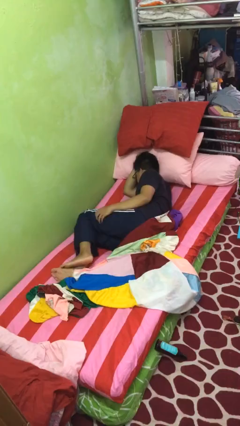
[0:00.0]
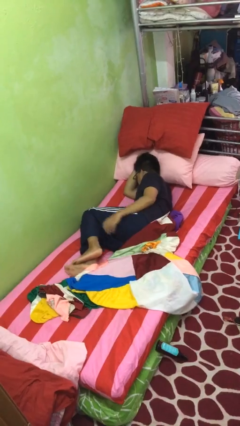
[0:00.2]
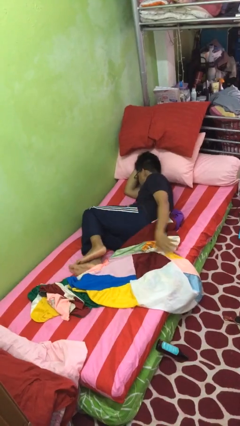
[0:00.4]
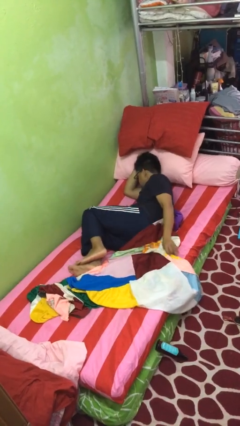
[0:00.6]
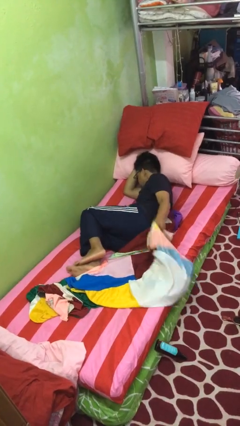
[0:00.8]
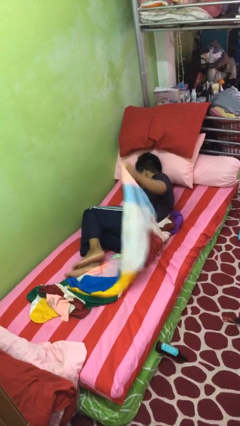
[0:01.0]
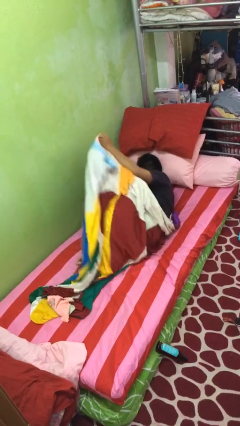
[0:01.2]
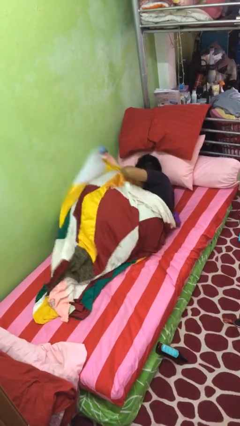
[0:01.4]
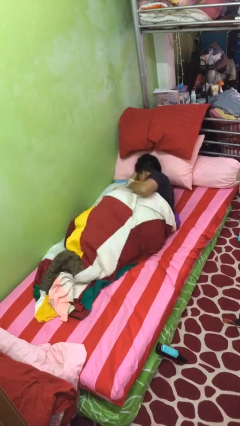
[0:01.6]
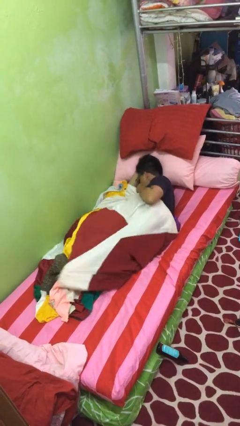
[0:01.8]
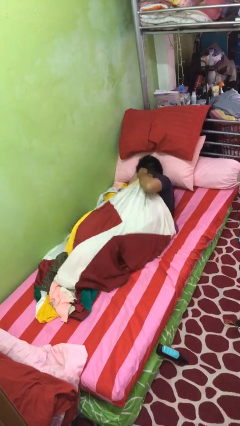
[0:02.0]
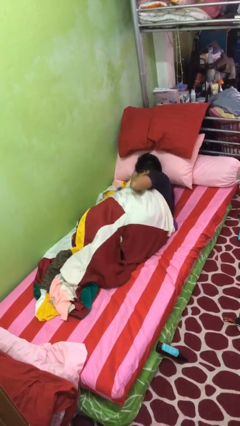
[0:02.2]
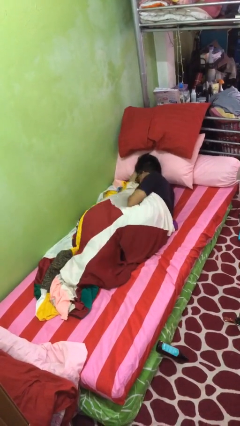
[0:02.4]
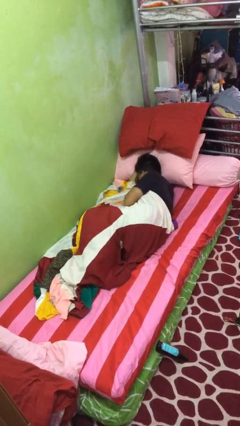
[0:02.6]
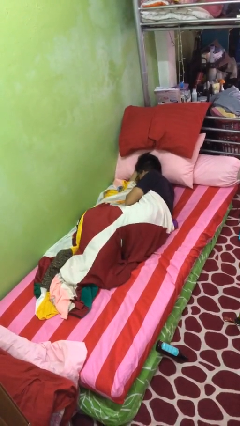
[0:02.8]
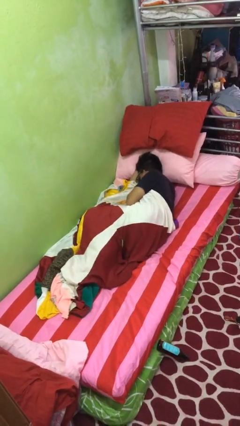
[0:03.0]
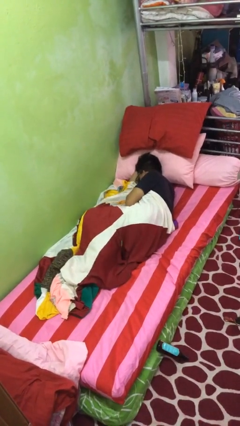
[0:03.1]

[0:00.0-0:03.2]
person covers with blanket

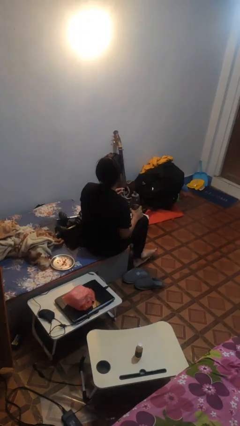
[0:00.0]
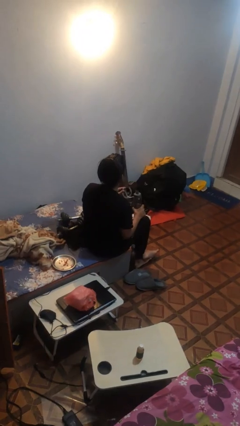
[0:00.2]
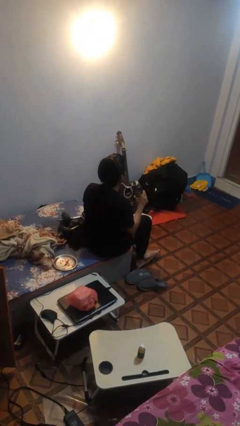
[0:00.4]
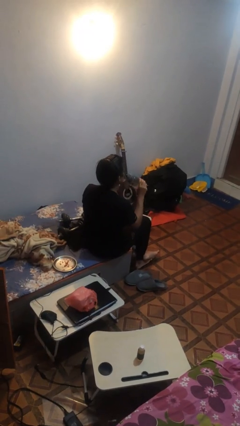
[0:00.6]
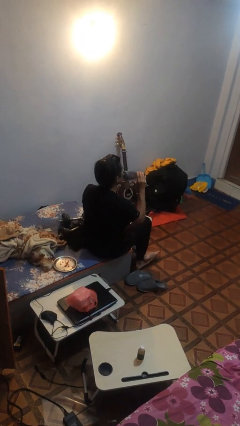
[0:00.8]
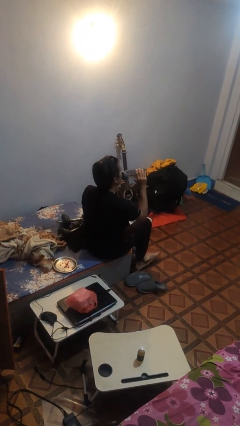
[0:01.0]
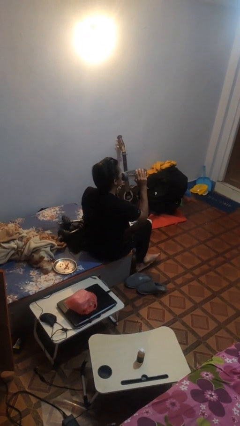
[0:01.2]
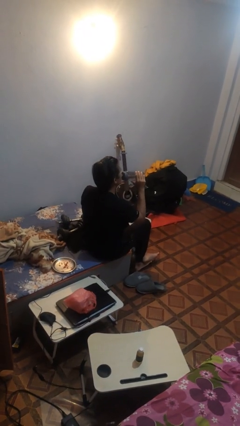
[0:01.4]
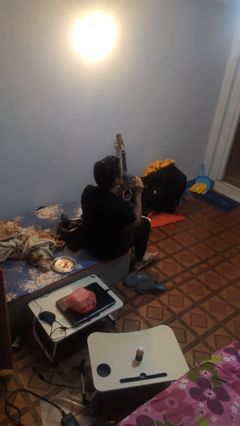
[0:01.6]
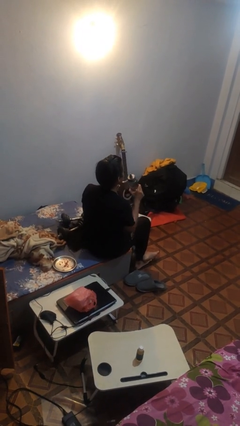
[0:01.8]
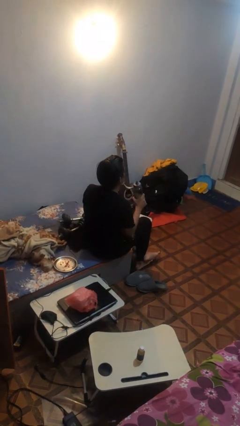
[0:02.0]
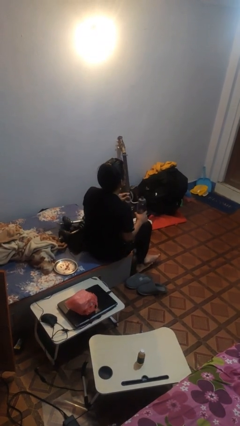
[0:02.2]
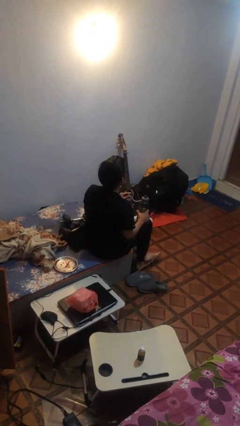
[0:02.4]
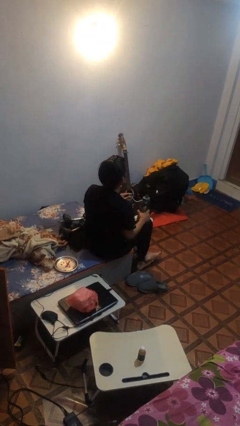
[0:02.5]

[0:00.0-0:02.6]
person drinks from bottle

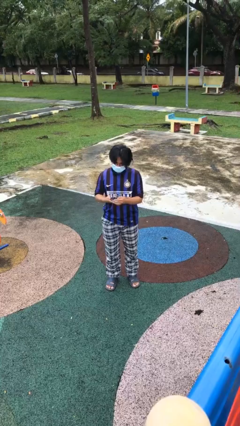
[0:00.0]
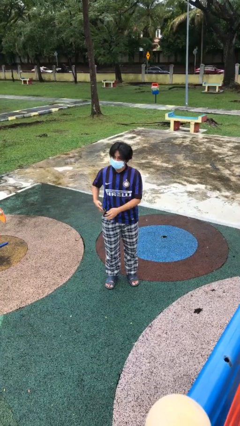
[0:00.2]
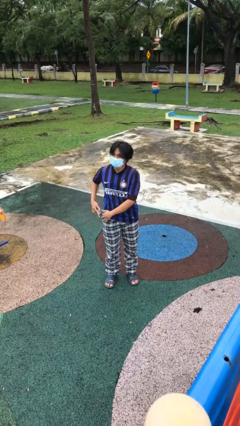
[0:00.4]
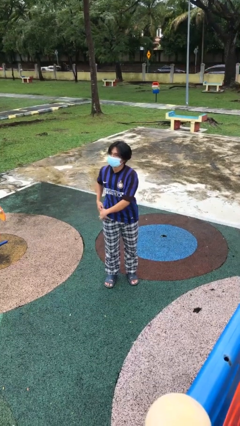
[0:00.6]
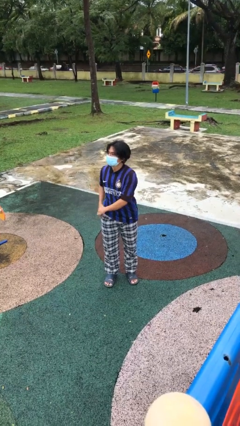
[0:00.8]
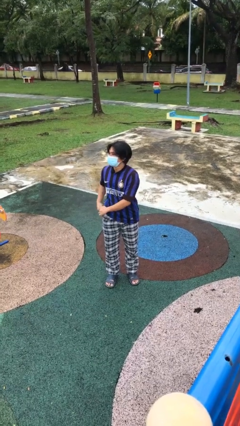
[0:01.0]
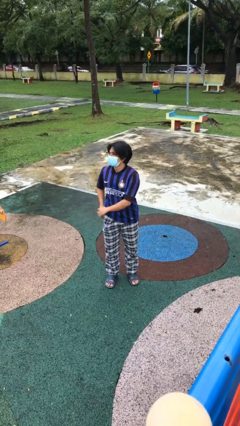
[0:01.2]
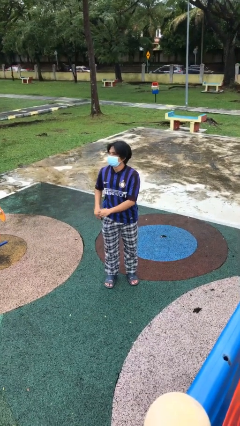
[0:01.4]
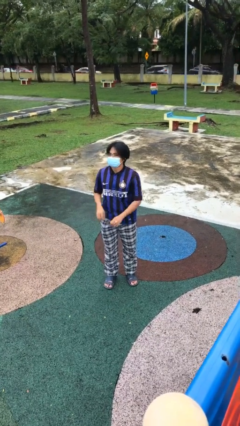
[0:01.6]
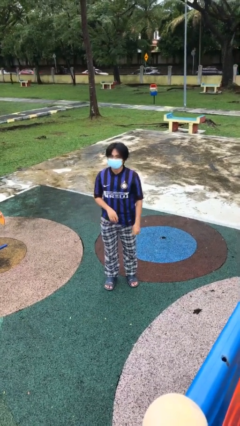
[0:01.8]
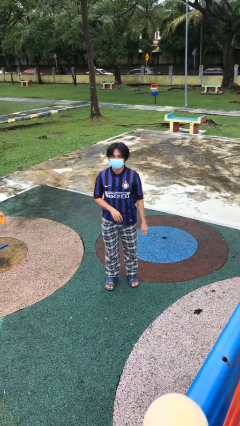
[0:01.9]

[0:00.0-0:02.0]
person puts phone into pocket

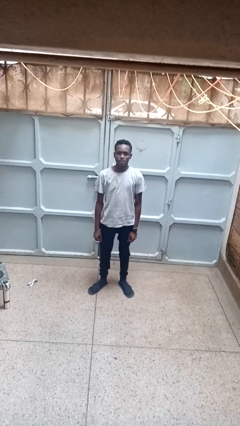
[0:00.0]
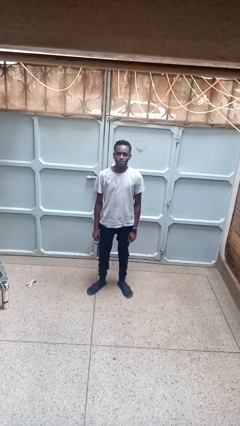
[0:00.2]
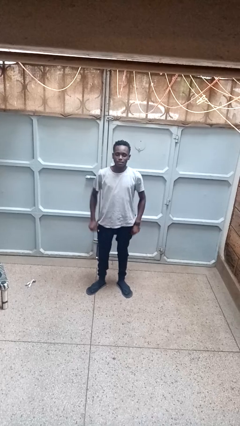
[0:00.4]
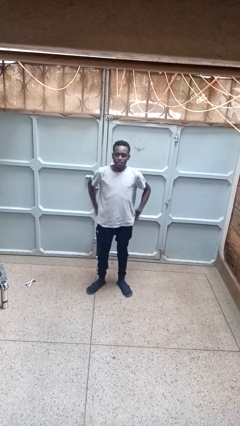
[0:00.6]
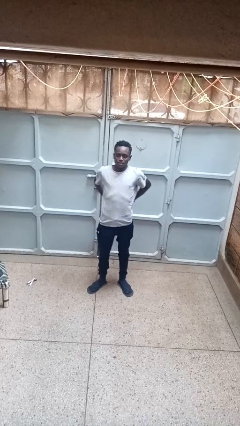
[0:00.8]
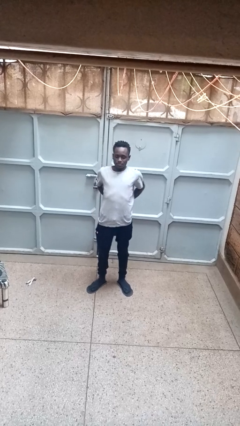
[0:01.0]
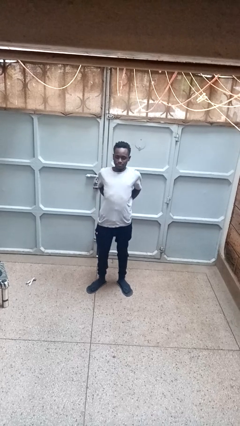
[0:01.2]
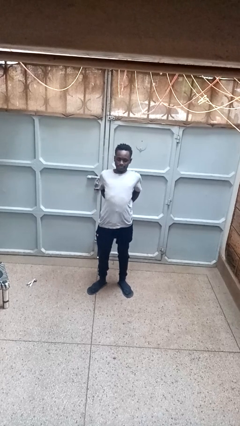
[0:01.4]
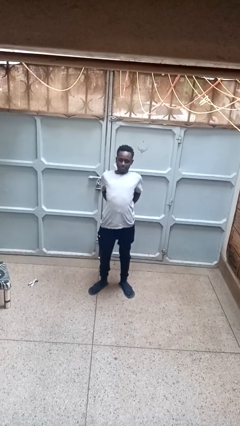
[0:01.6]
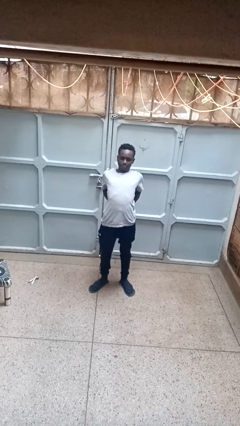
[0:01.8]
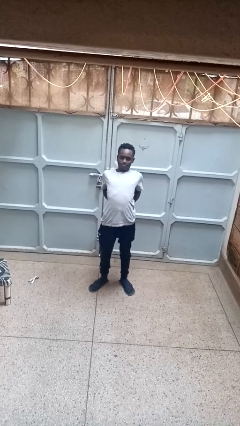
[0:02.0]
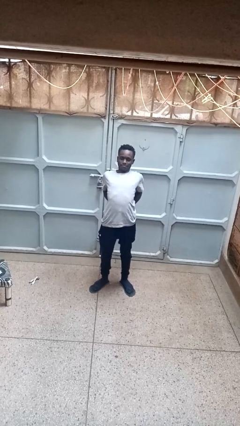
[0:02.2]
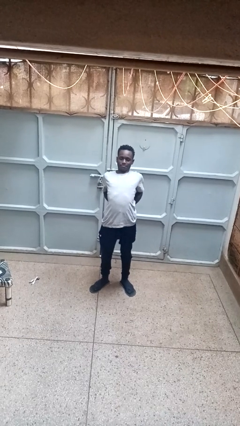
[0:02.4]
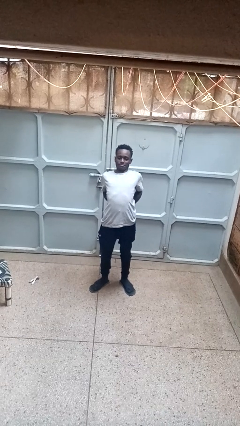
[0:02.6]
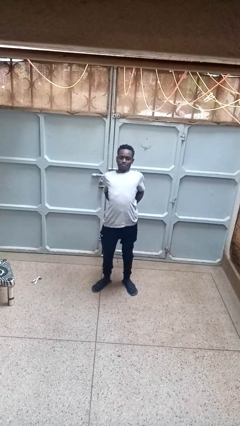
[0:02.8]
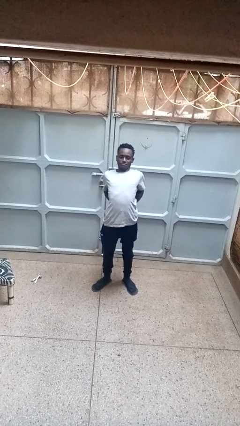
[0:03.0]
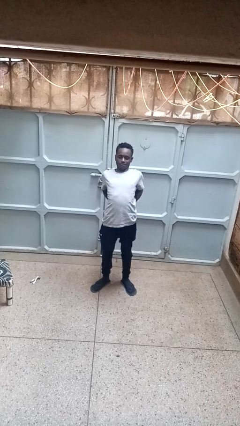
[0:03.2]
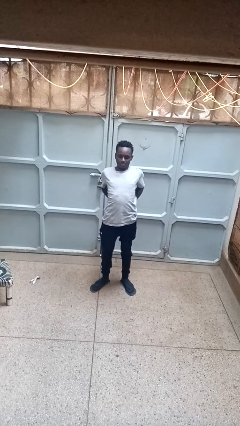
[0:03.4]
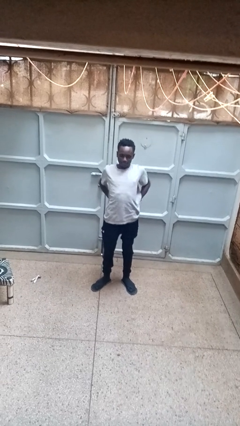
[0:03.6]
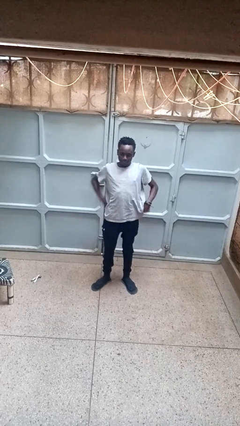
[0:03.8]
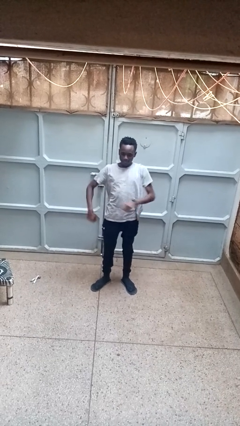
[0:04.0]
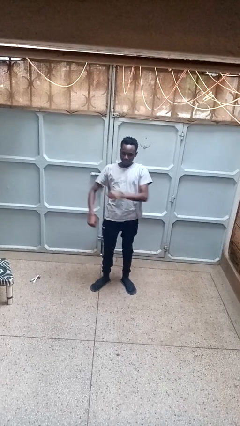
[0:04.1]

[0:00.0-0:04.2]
person stretches back

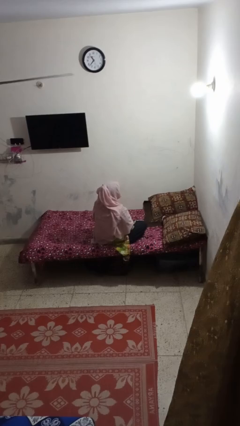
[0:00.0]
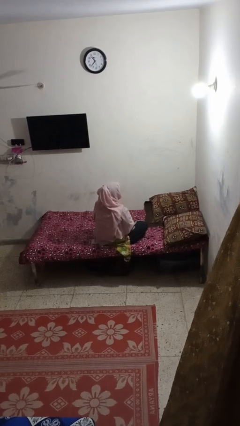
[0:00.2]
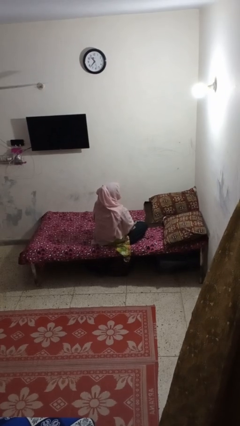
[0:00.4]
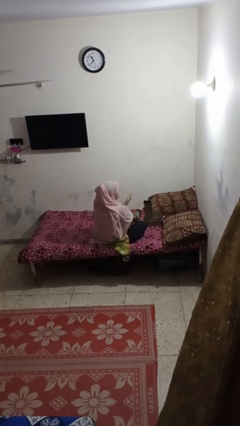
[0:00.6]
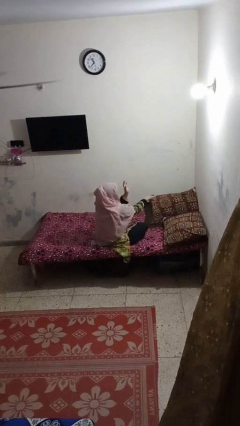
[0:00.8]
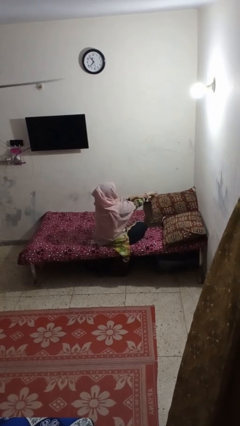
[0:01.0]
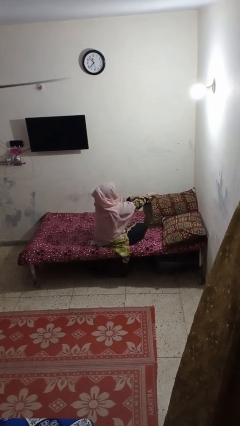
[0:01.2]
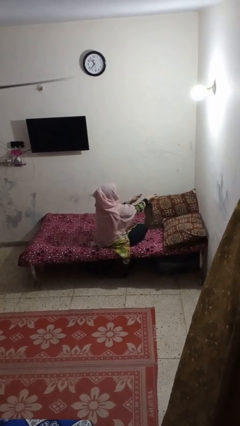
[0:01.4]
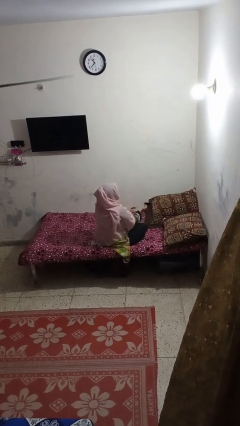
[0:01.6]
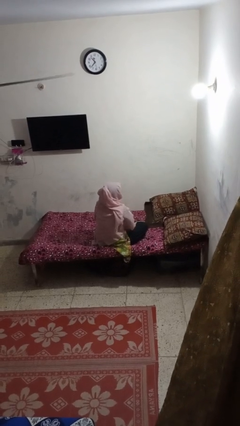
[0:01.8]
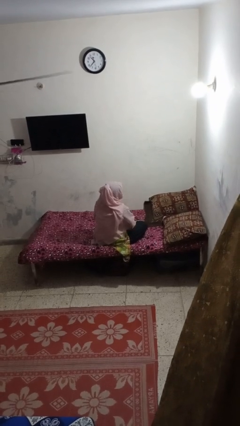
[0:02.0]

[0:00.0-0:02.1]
person swats bug

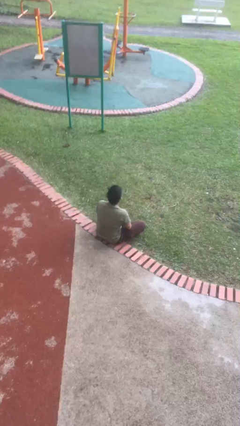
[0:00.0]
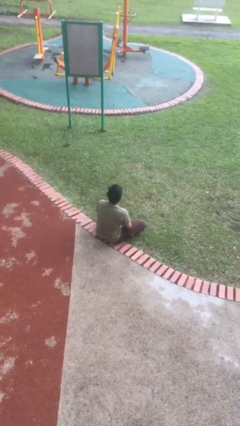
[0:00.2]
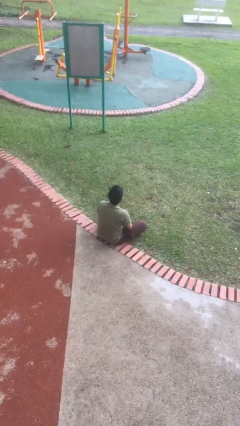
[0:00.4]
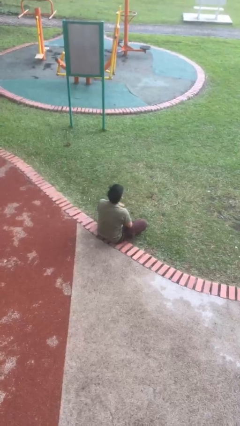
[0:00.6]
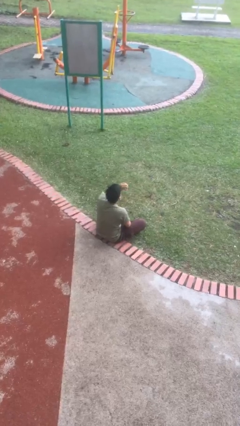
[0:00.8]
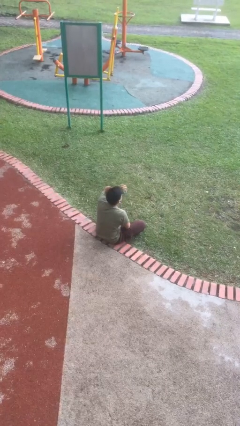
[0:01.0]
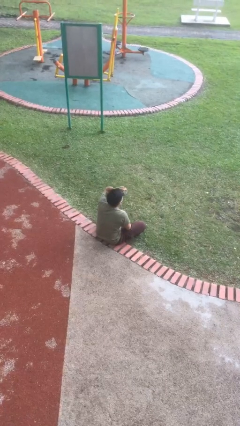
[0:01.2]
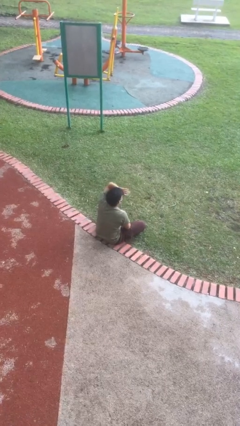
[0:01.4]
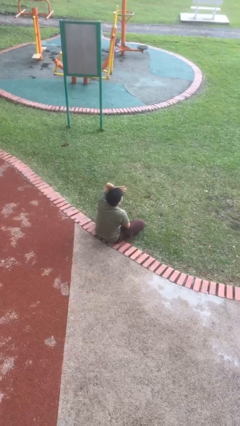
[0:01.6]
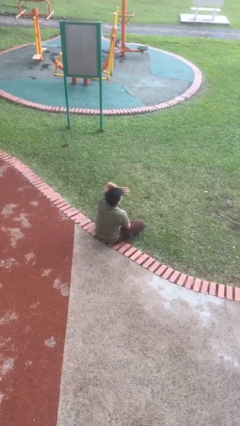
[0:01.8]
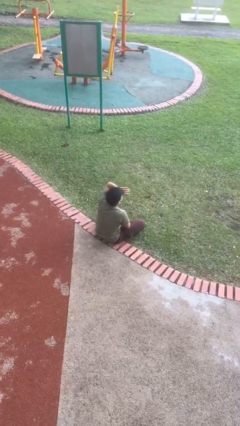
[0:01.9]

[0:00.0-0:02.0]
person rubs eyes

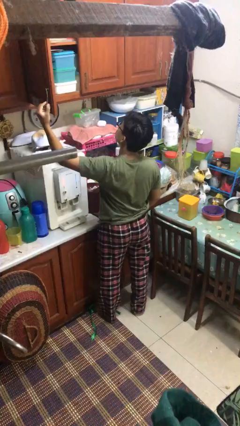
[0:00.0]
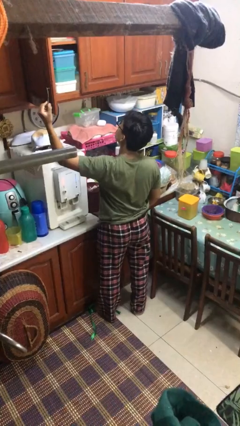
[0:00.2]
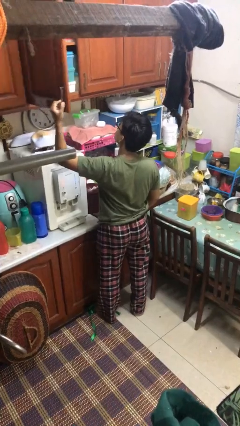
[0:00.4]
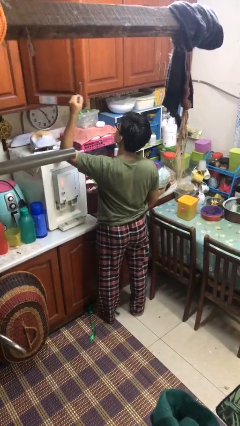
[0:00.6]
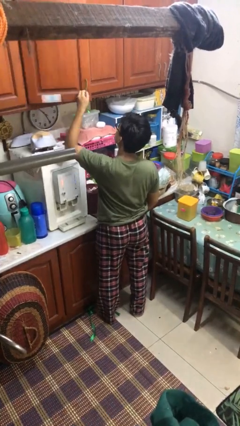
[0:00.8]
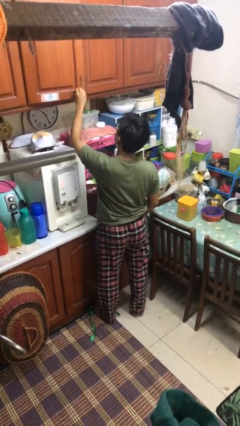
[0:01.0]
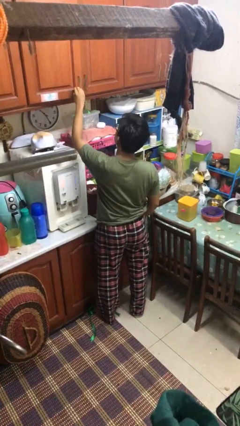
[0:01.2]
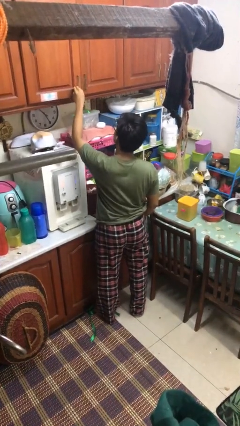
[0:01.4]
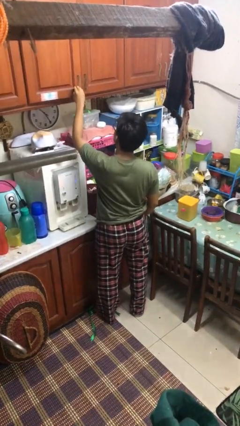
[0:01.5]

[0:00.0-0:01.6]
person closes kitchen drawer
